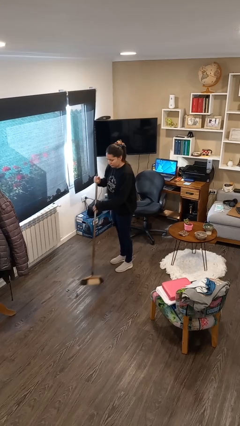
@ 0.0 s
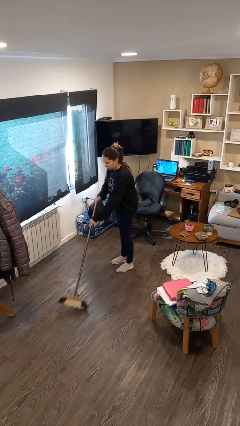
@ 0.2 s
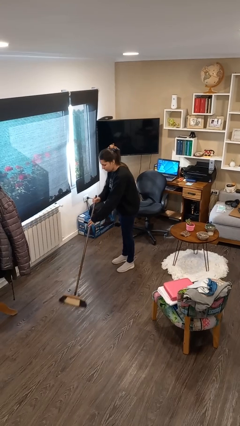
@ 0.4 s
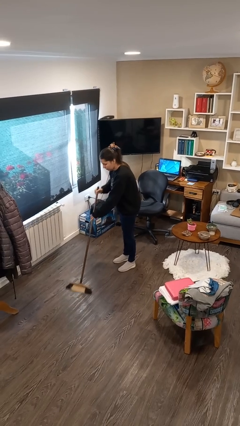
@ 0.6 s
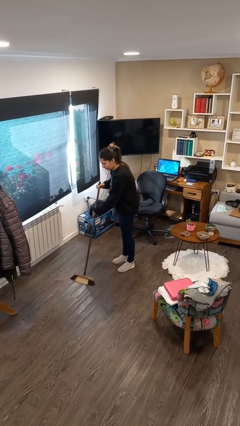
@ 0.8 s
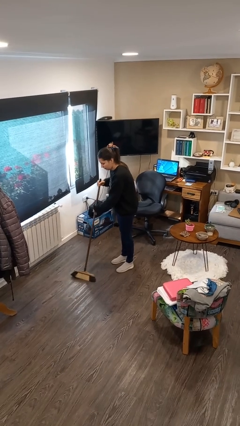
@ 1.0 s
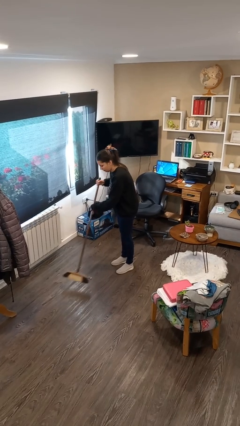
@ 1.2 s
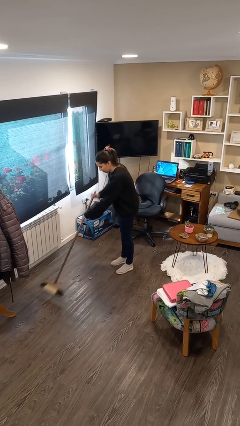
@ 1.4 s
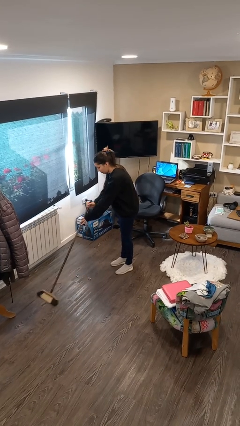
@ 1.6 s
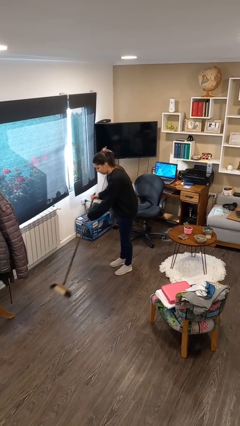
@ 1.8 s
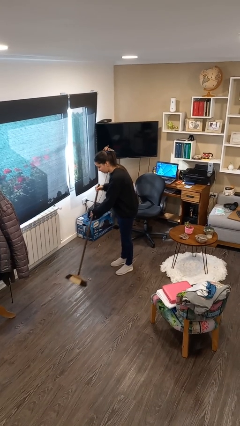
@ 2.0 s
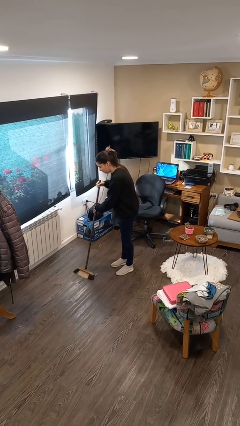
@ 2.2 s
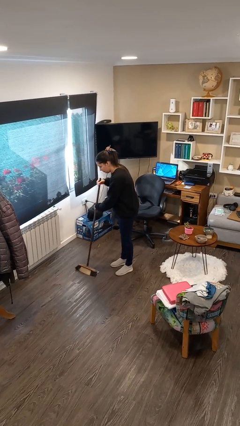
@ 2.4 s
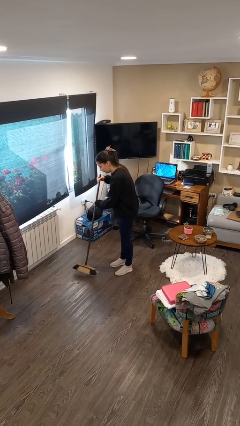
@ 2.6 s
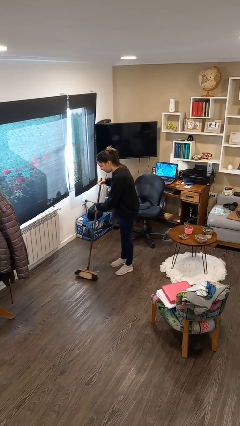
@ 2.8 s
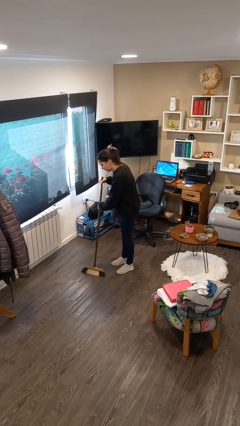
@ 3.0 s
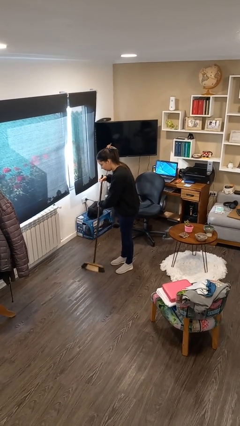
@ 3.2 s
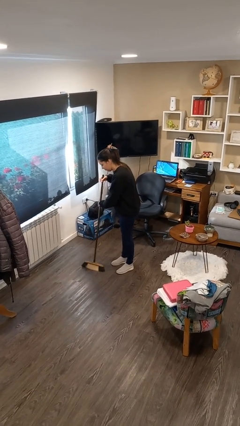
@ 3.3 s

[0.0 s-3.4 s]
person sweeps floor

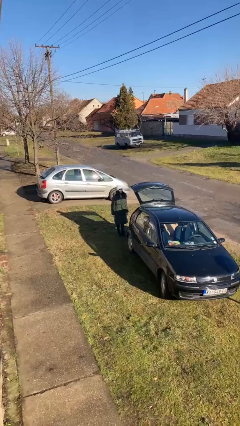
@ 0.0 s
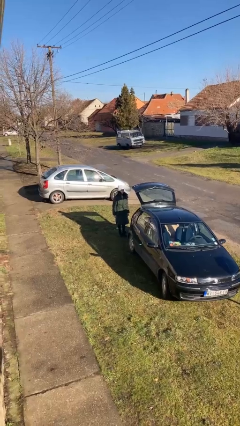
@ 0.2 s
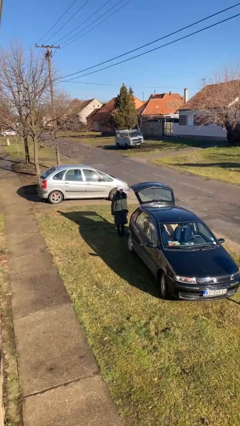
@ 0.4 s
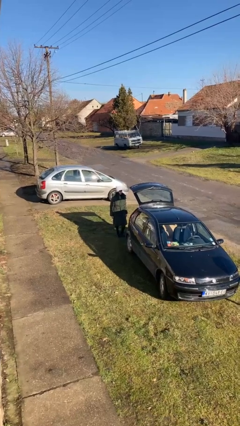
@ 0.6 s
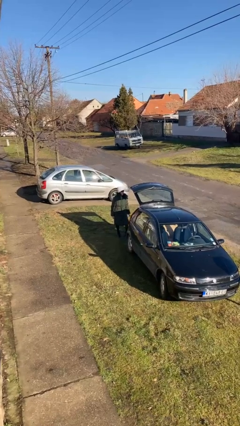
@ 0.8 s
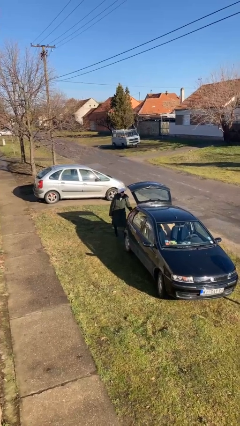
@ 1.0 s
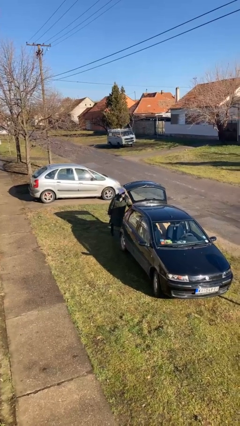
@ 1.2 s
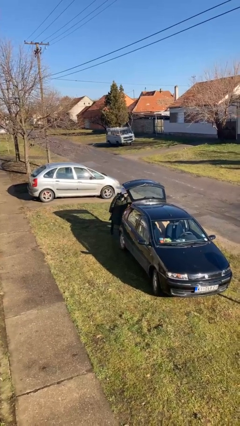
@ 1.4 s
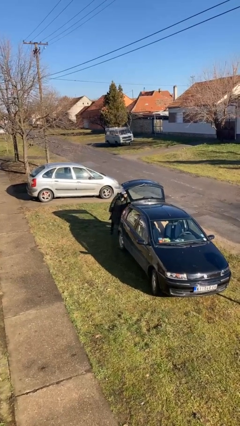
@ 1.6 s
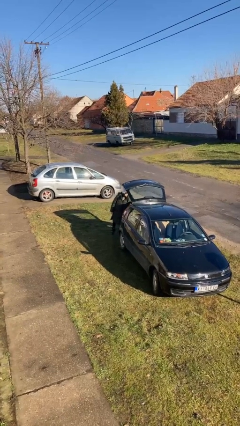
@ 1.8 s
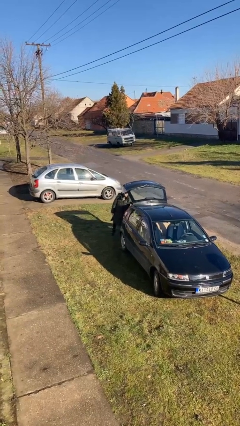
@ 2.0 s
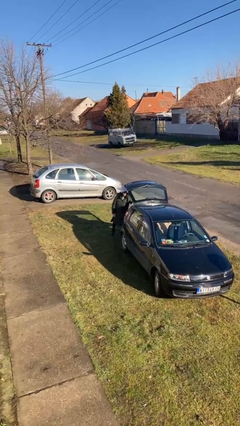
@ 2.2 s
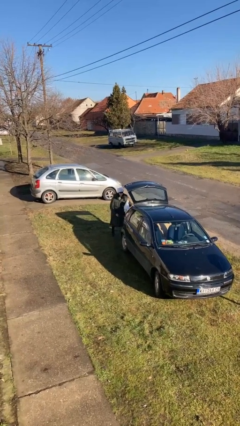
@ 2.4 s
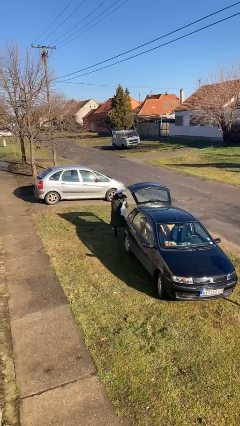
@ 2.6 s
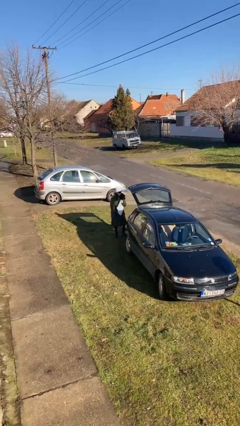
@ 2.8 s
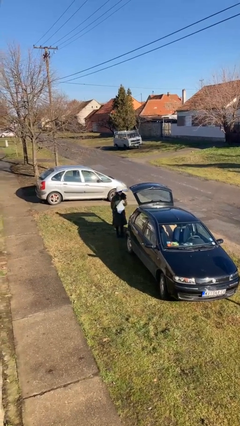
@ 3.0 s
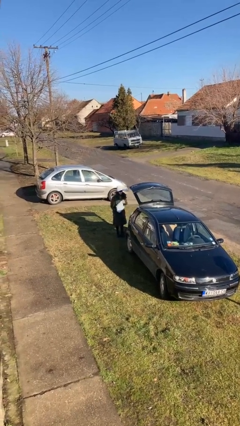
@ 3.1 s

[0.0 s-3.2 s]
person unloads car

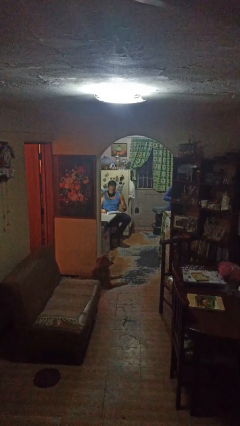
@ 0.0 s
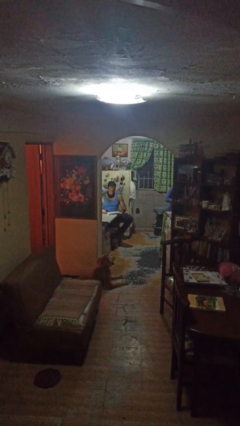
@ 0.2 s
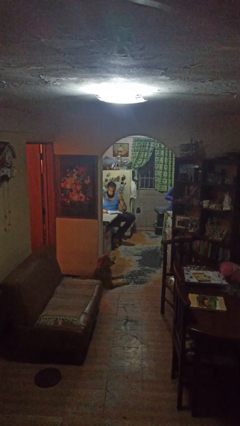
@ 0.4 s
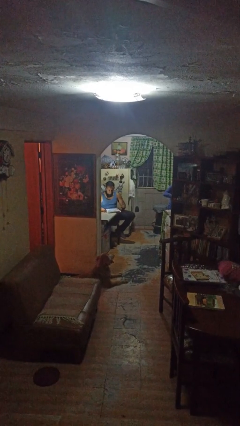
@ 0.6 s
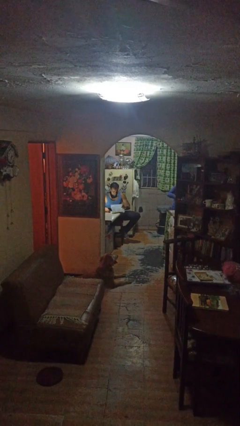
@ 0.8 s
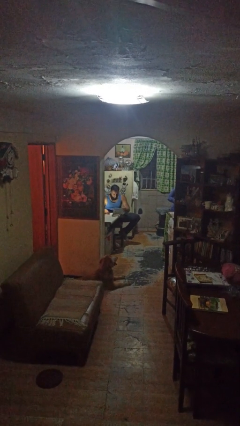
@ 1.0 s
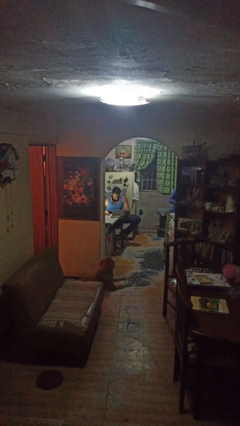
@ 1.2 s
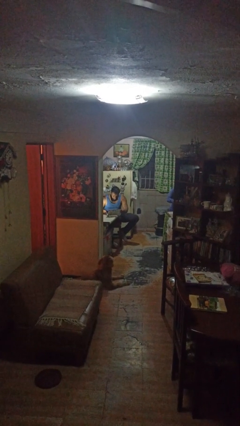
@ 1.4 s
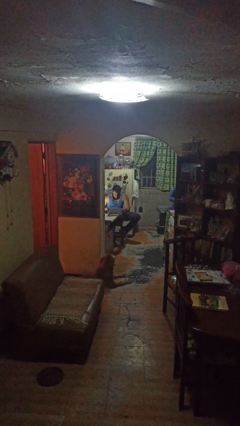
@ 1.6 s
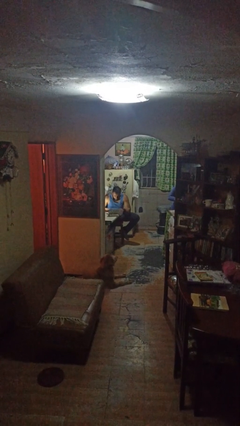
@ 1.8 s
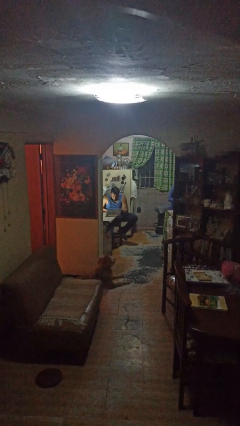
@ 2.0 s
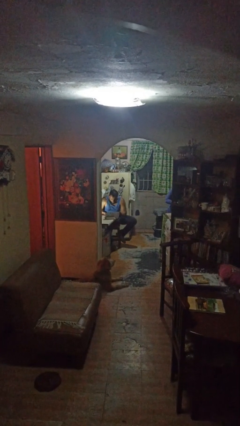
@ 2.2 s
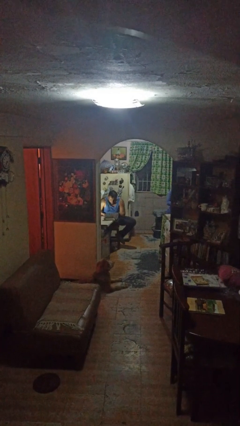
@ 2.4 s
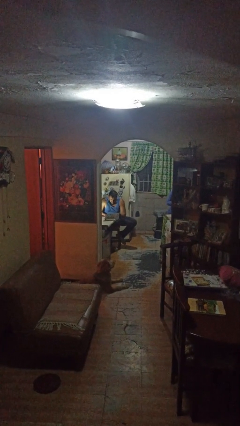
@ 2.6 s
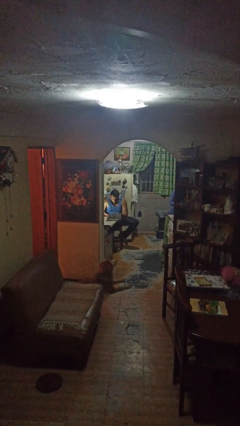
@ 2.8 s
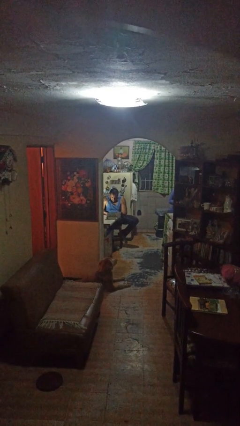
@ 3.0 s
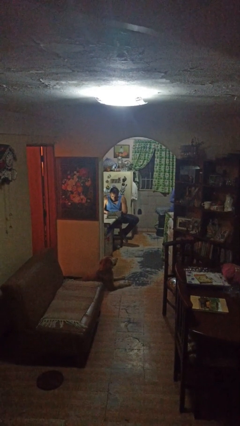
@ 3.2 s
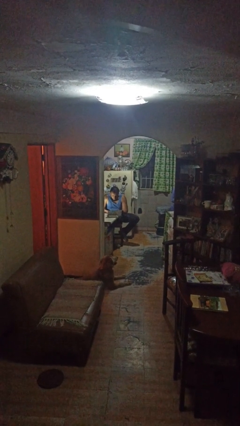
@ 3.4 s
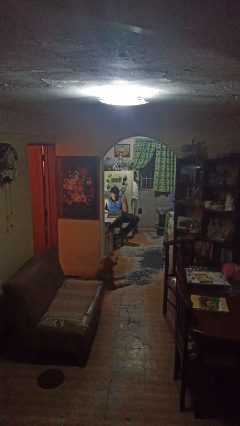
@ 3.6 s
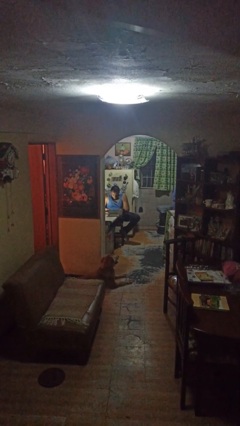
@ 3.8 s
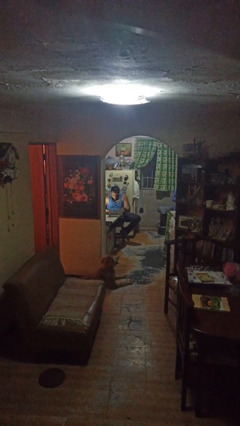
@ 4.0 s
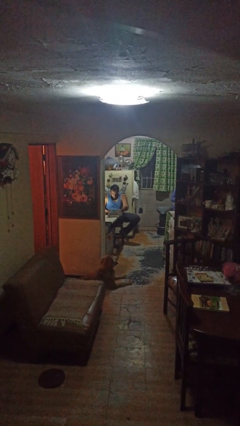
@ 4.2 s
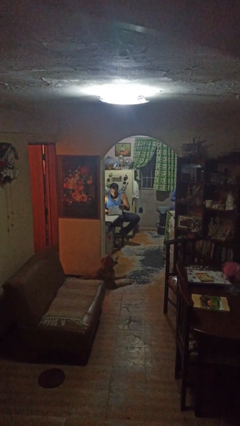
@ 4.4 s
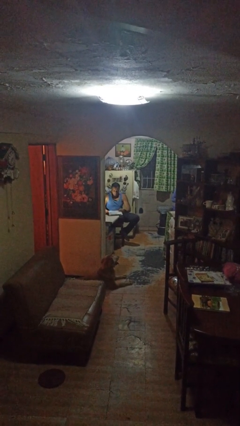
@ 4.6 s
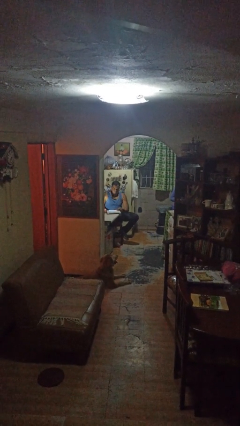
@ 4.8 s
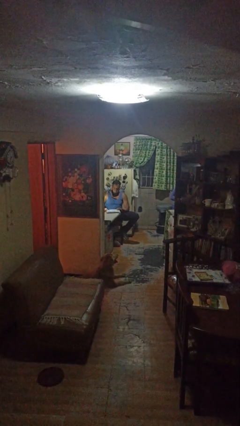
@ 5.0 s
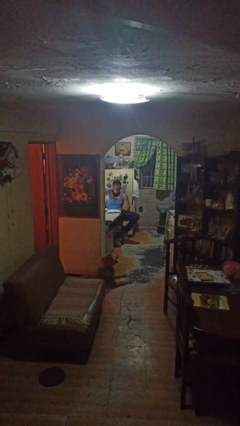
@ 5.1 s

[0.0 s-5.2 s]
person interacts with laptop

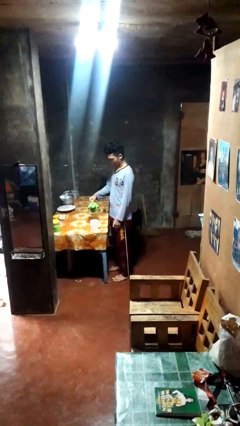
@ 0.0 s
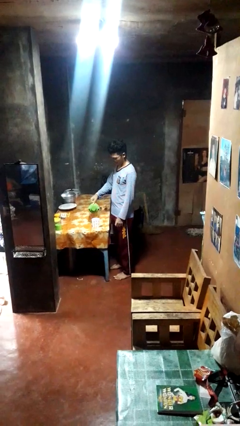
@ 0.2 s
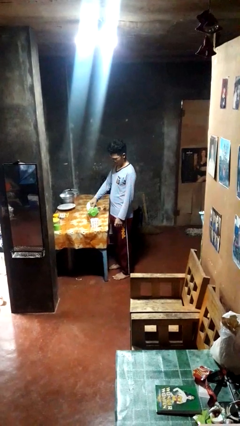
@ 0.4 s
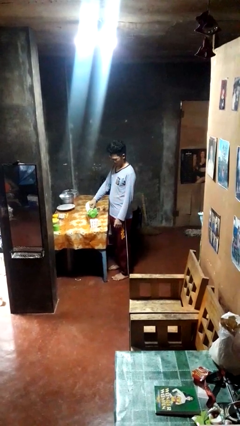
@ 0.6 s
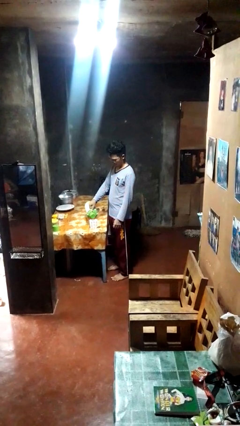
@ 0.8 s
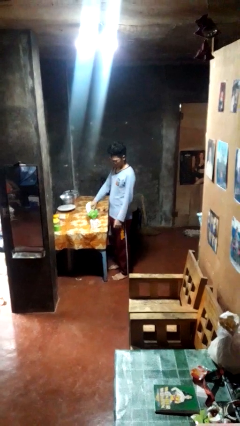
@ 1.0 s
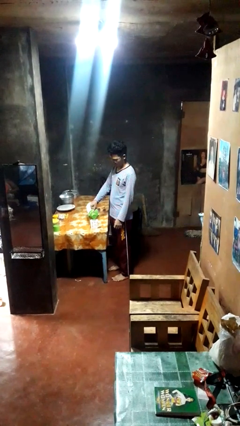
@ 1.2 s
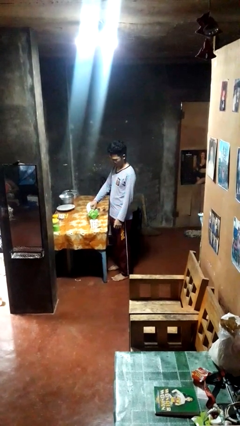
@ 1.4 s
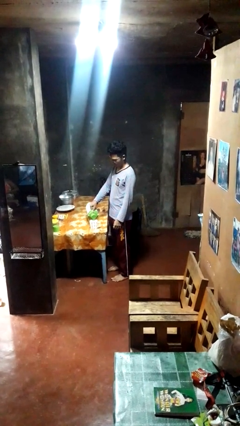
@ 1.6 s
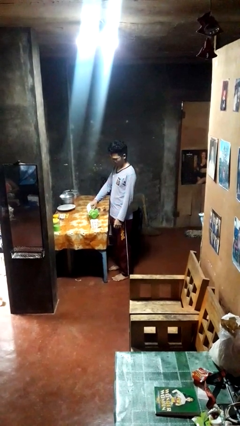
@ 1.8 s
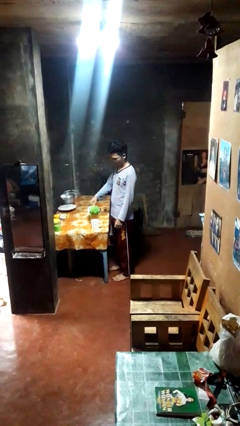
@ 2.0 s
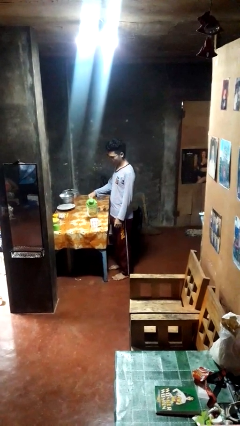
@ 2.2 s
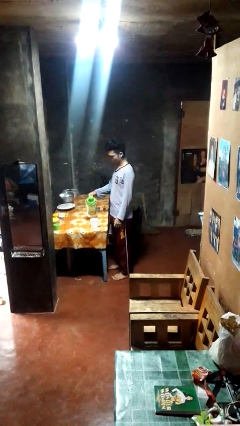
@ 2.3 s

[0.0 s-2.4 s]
person pours coffee into mug

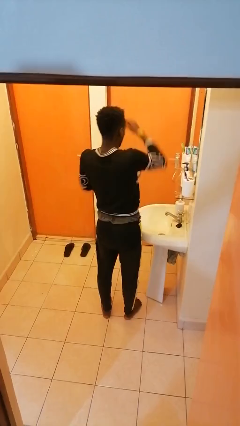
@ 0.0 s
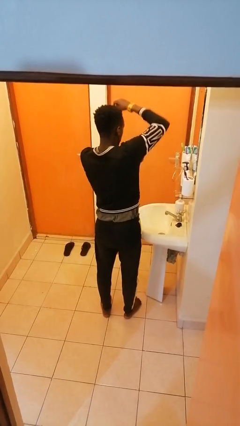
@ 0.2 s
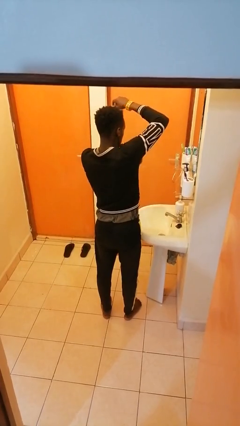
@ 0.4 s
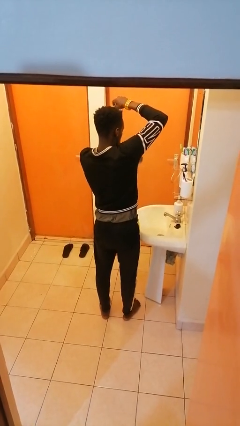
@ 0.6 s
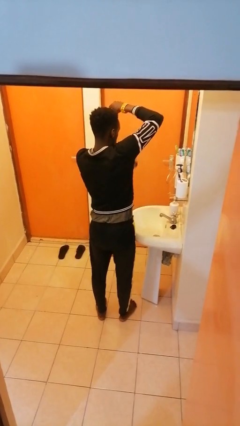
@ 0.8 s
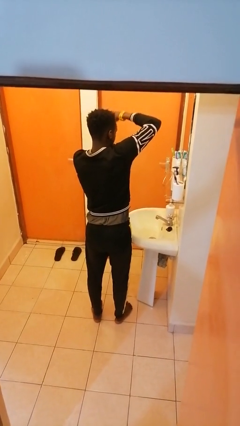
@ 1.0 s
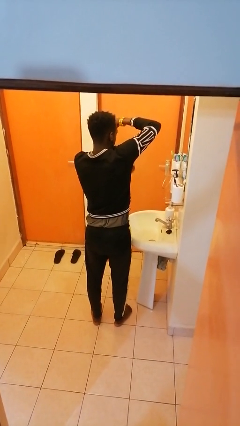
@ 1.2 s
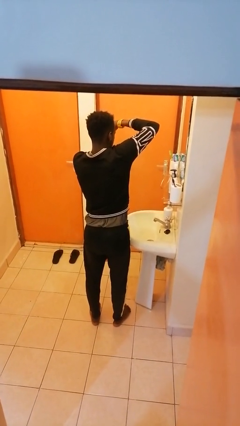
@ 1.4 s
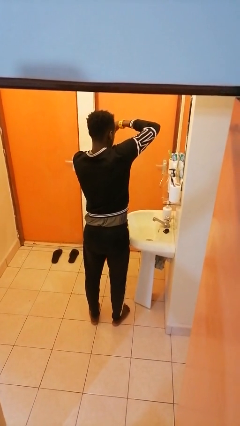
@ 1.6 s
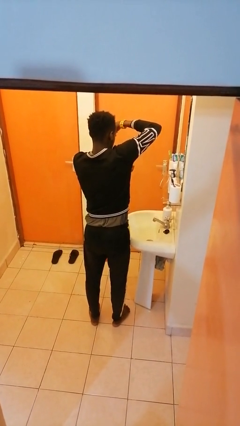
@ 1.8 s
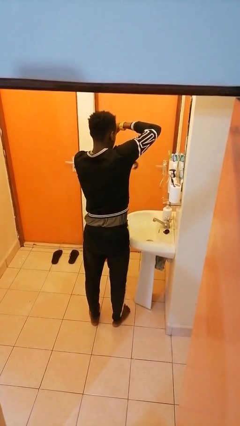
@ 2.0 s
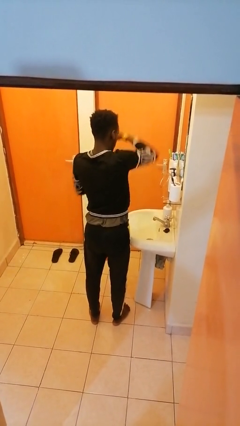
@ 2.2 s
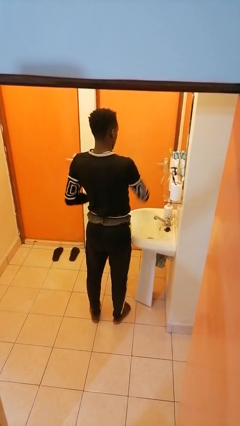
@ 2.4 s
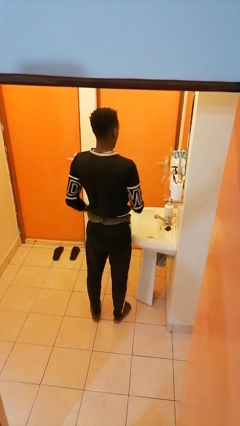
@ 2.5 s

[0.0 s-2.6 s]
person applies deodorant

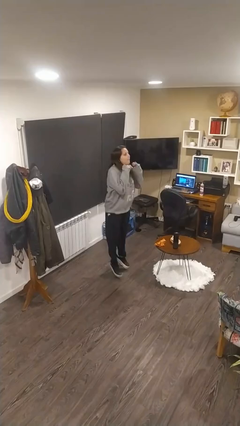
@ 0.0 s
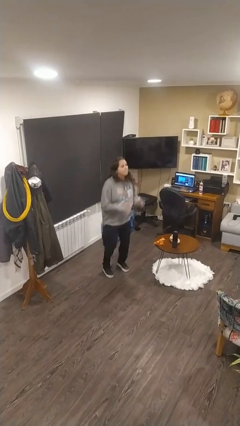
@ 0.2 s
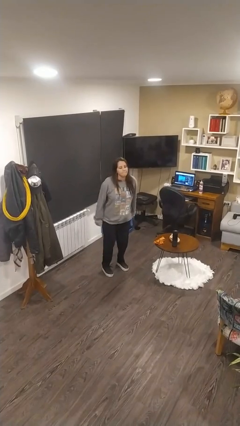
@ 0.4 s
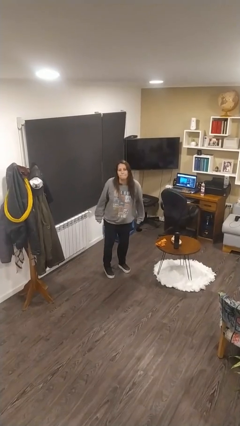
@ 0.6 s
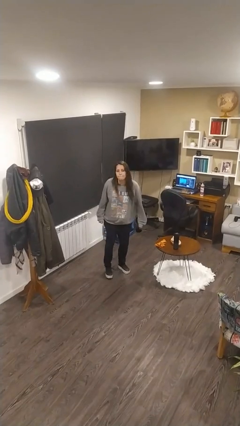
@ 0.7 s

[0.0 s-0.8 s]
person jumps
